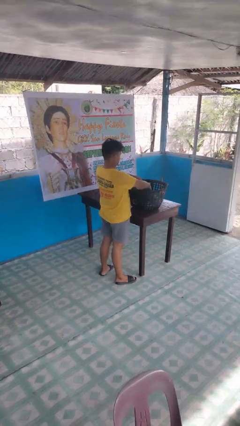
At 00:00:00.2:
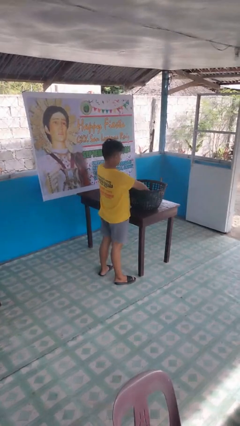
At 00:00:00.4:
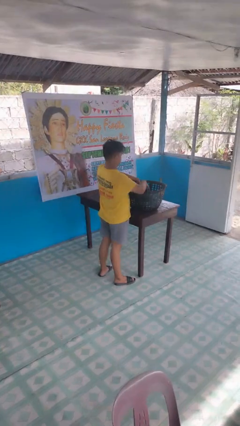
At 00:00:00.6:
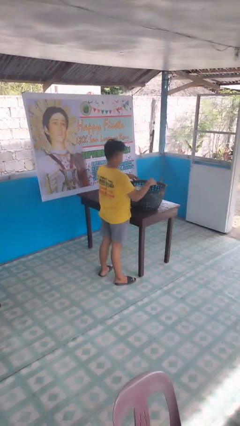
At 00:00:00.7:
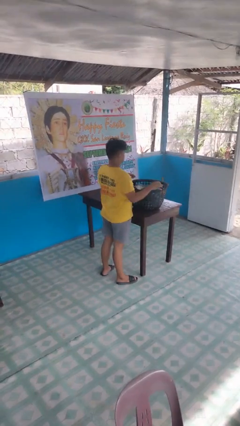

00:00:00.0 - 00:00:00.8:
person puts object into basket

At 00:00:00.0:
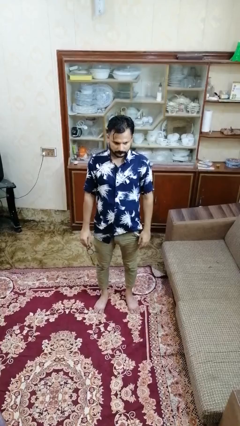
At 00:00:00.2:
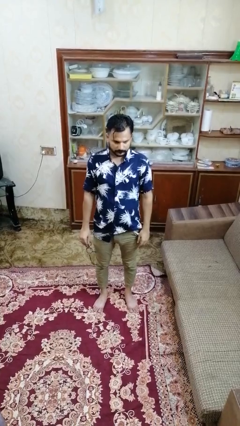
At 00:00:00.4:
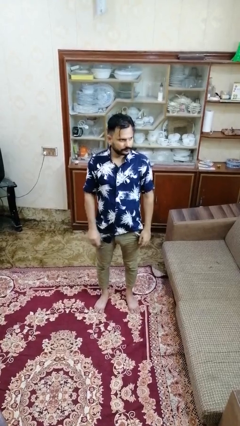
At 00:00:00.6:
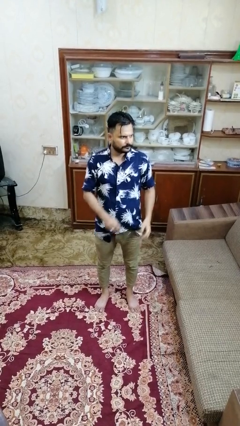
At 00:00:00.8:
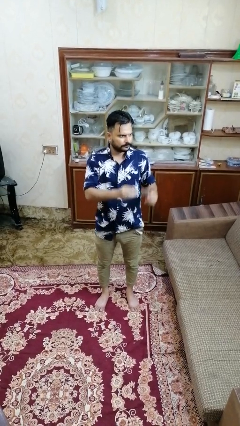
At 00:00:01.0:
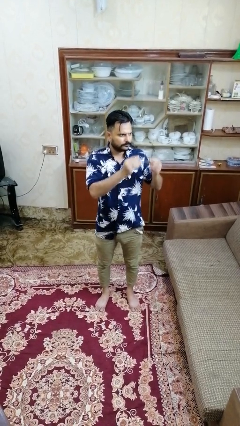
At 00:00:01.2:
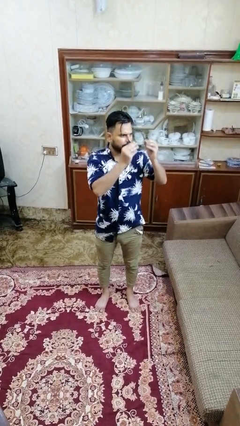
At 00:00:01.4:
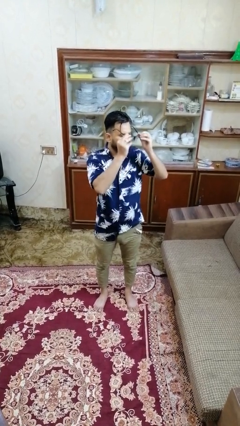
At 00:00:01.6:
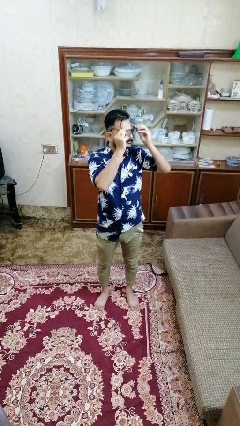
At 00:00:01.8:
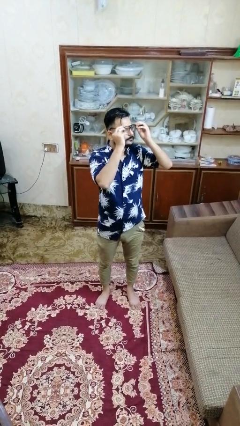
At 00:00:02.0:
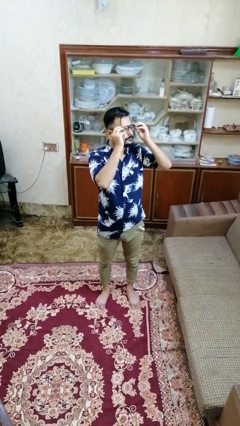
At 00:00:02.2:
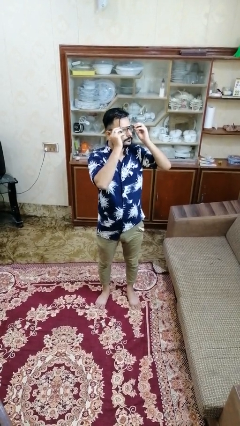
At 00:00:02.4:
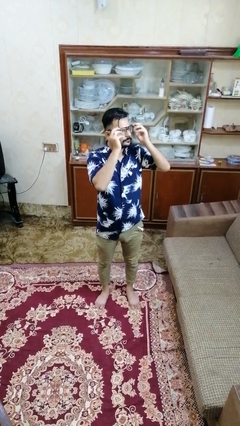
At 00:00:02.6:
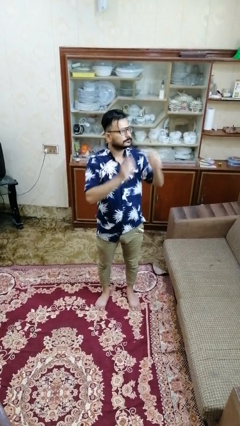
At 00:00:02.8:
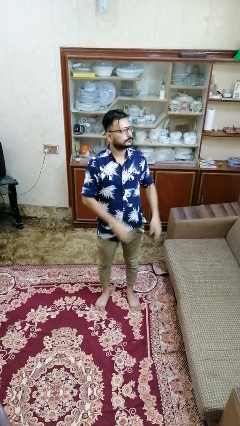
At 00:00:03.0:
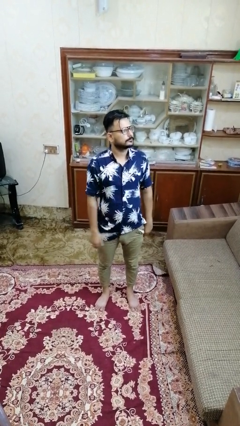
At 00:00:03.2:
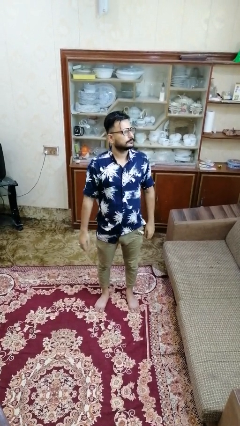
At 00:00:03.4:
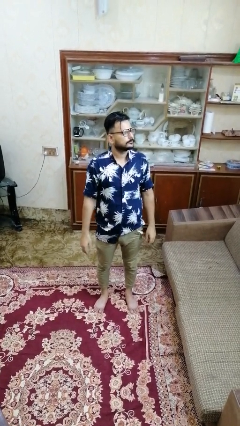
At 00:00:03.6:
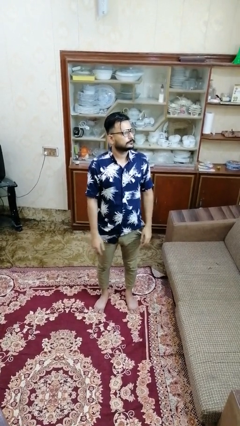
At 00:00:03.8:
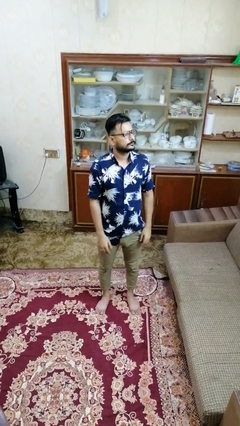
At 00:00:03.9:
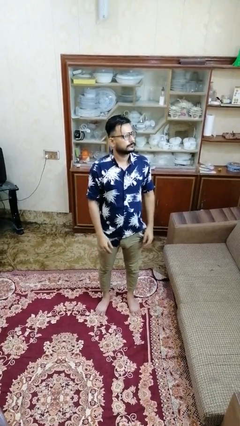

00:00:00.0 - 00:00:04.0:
person puts on glasses

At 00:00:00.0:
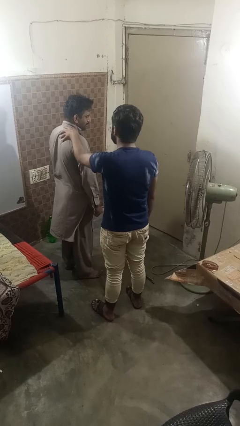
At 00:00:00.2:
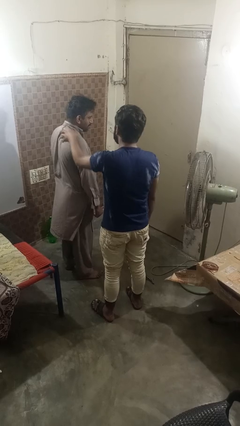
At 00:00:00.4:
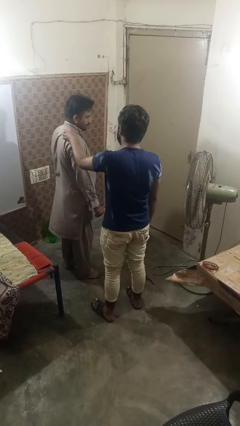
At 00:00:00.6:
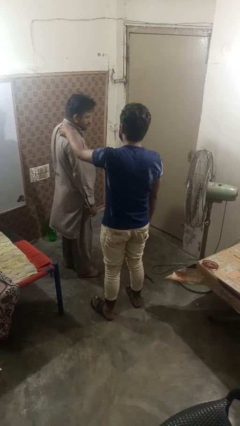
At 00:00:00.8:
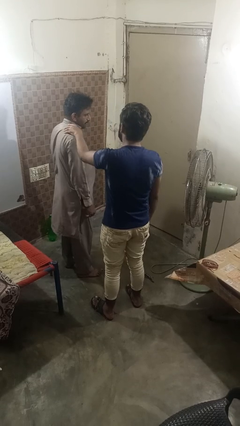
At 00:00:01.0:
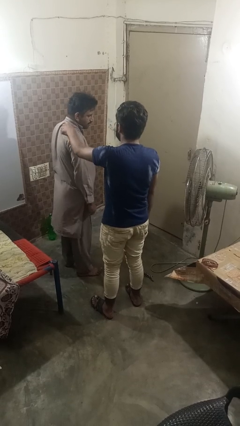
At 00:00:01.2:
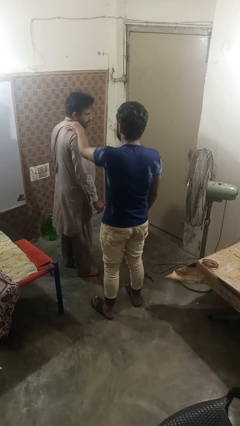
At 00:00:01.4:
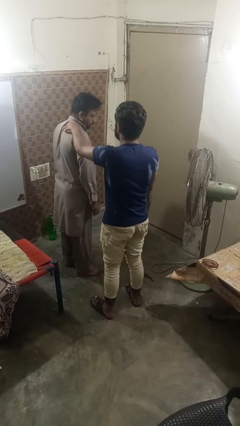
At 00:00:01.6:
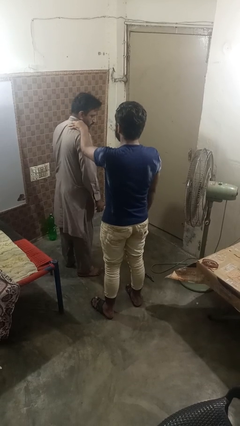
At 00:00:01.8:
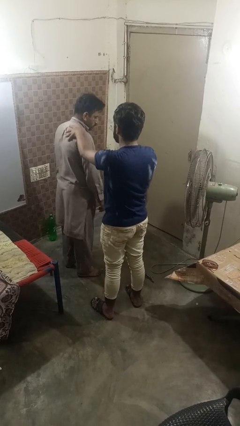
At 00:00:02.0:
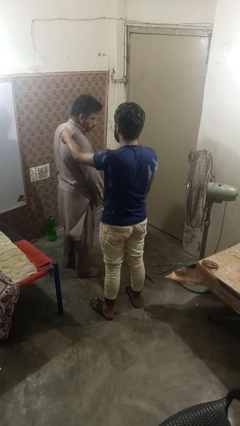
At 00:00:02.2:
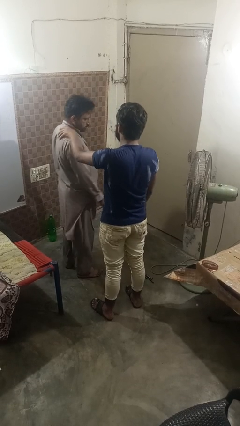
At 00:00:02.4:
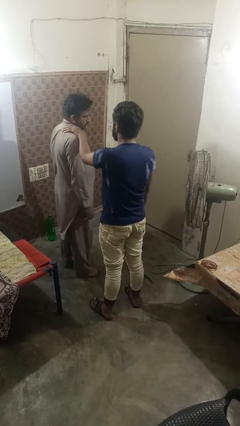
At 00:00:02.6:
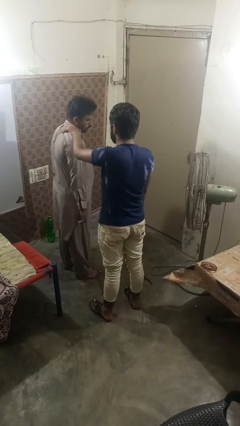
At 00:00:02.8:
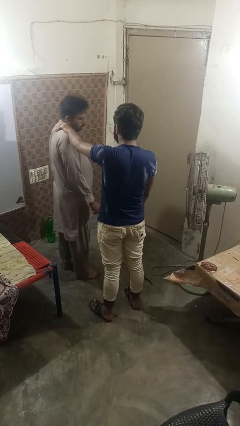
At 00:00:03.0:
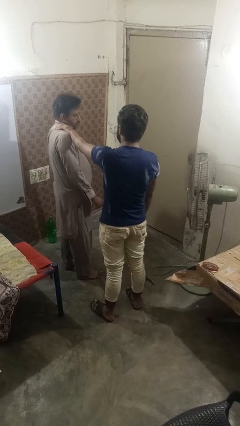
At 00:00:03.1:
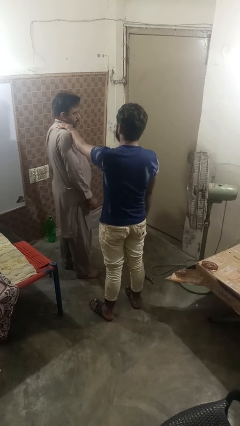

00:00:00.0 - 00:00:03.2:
person grabs person by shoulder

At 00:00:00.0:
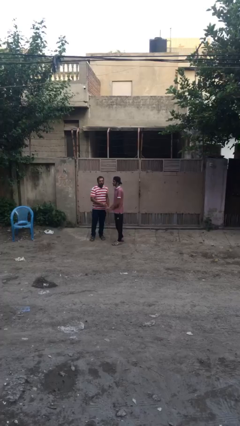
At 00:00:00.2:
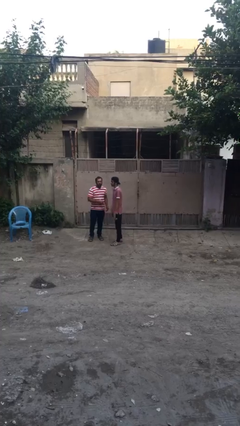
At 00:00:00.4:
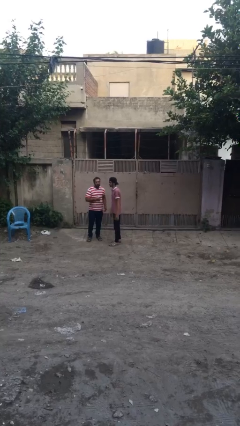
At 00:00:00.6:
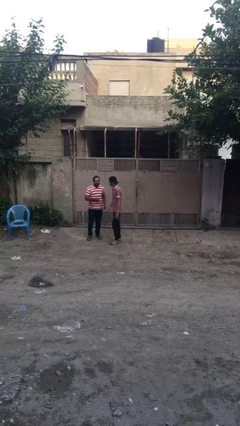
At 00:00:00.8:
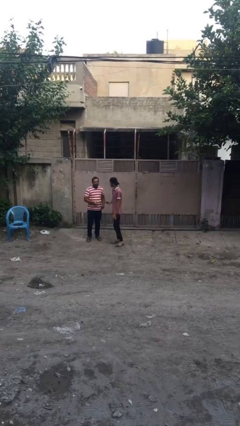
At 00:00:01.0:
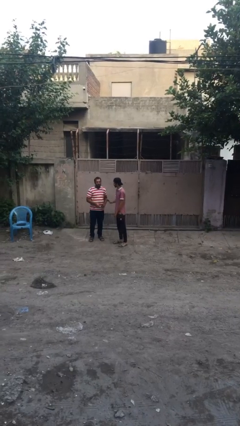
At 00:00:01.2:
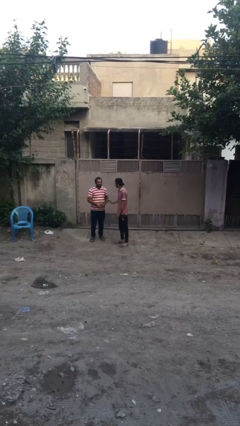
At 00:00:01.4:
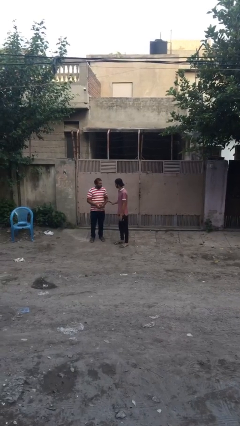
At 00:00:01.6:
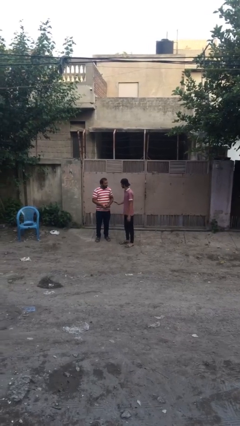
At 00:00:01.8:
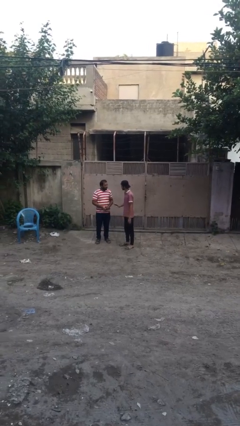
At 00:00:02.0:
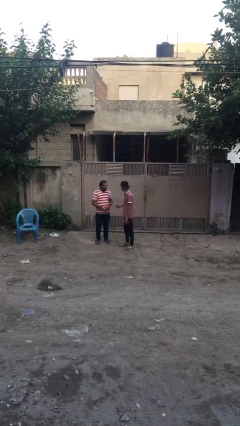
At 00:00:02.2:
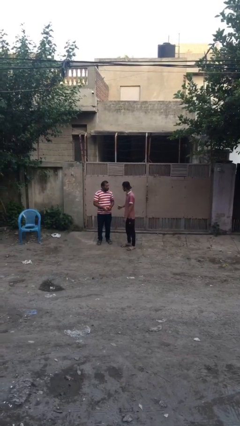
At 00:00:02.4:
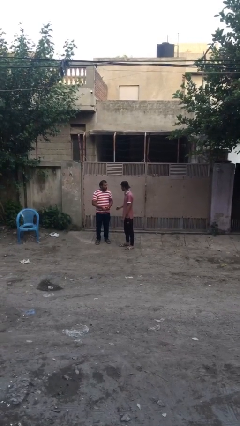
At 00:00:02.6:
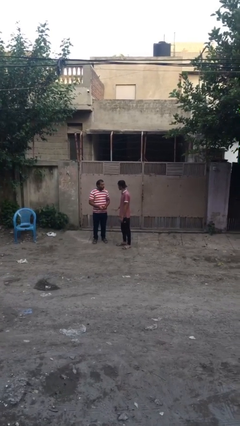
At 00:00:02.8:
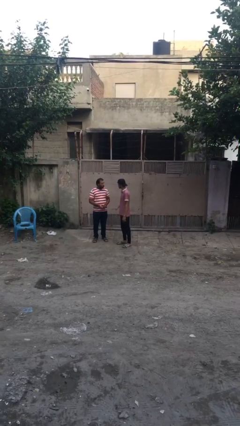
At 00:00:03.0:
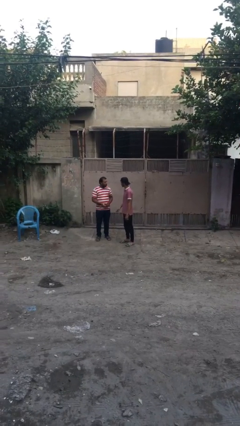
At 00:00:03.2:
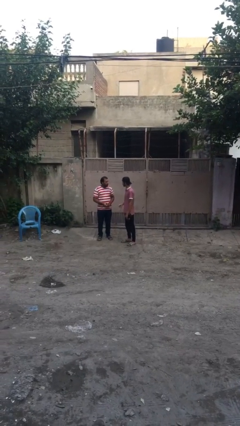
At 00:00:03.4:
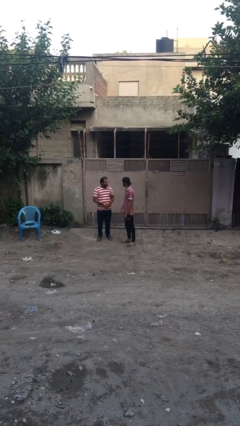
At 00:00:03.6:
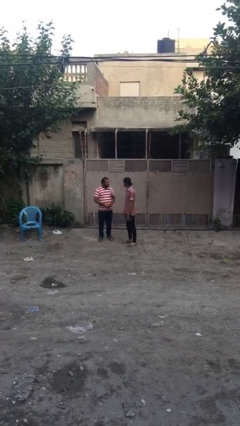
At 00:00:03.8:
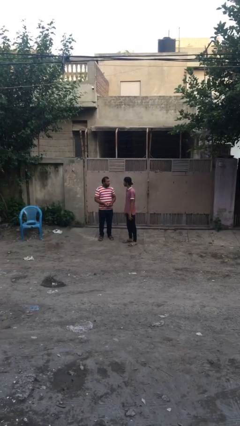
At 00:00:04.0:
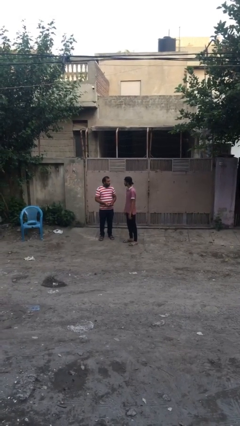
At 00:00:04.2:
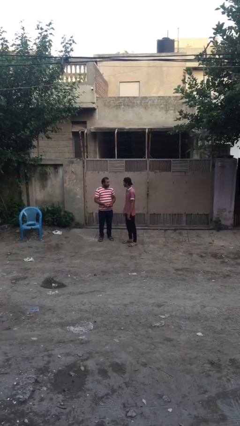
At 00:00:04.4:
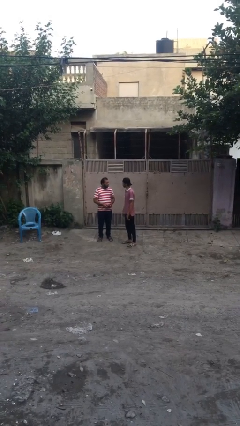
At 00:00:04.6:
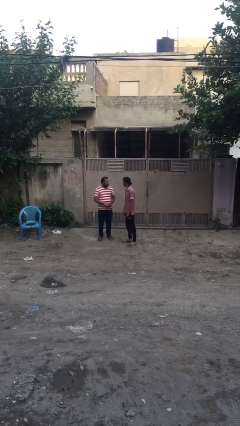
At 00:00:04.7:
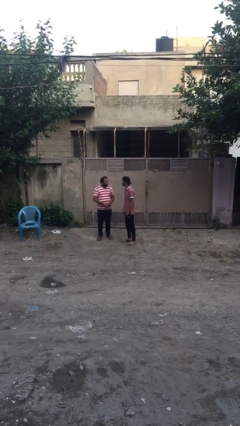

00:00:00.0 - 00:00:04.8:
person talks to person

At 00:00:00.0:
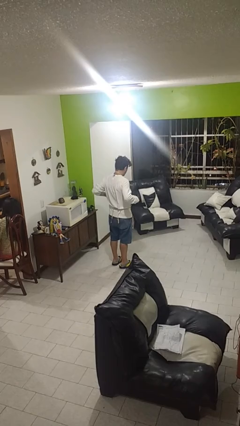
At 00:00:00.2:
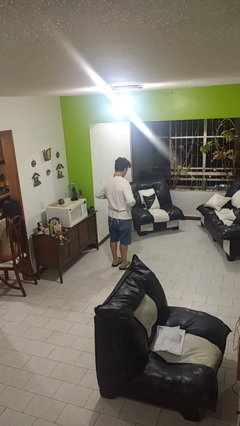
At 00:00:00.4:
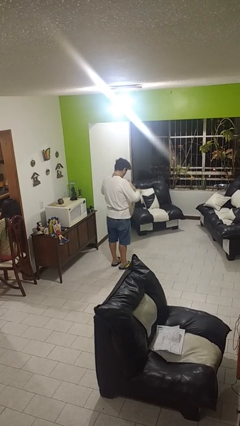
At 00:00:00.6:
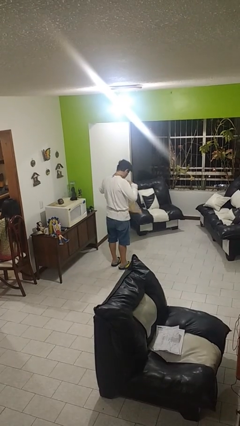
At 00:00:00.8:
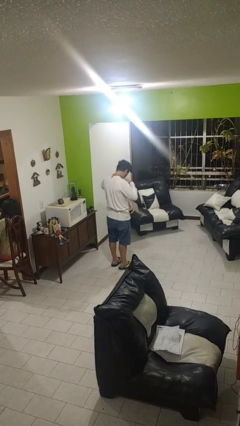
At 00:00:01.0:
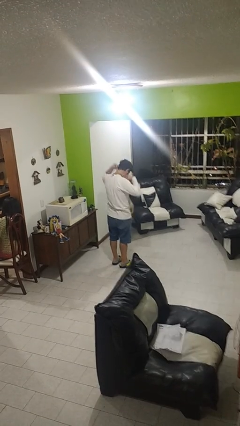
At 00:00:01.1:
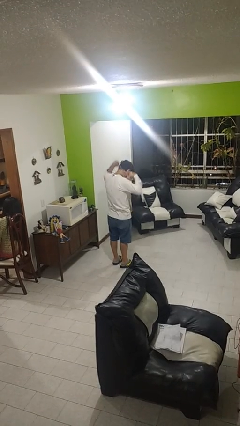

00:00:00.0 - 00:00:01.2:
person takes off apron

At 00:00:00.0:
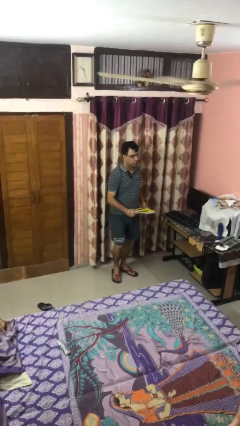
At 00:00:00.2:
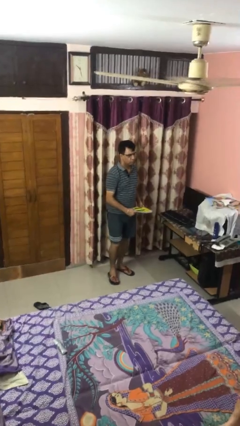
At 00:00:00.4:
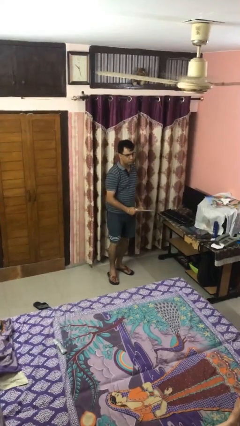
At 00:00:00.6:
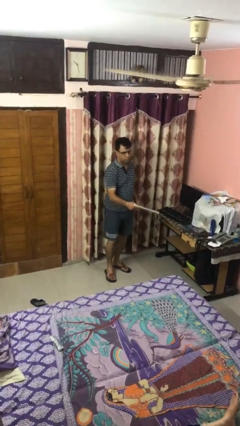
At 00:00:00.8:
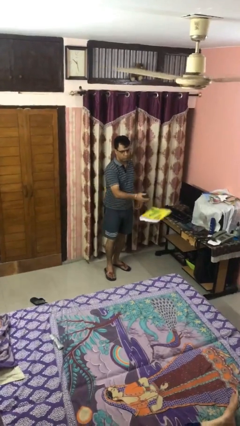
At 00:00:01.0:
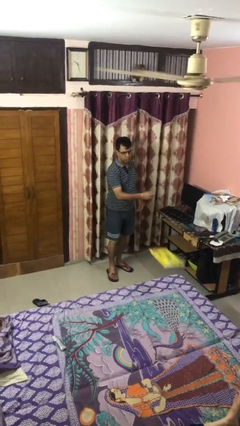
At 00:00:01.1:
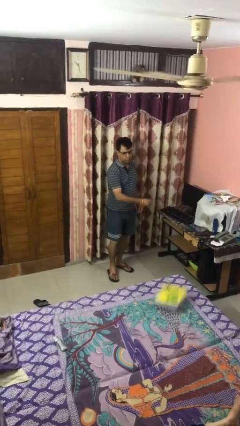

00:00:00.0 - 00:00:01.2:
person throws object on bed

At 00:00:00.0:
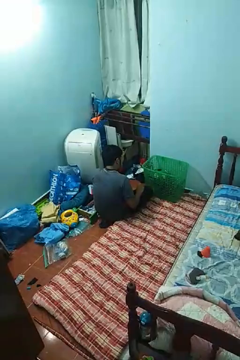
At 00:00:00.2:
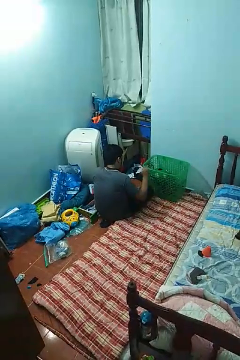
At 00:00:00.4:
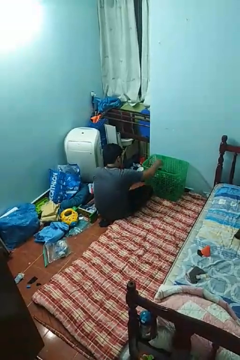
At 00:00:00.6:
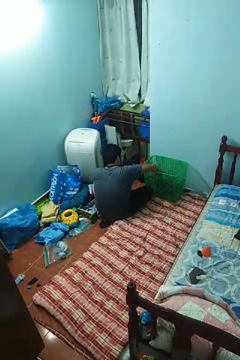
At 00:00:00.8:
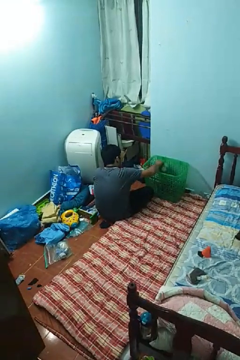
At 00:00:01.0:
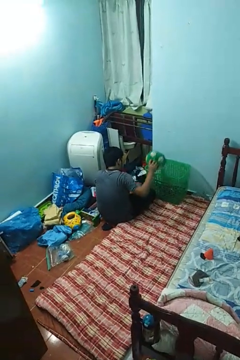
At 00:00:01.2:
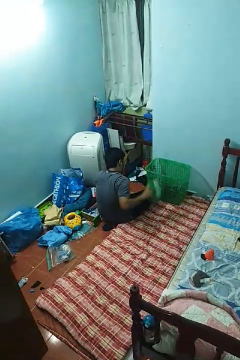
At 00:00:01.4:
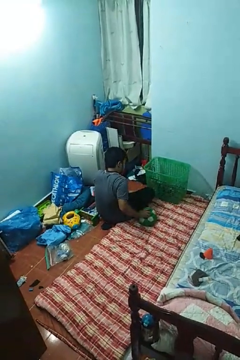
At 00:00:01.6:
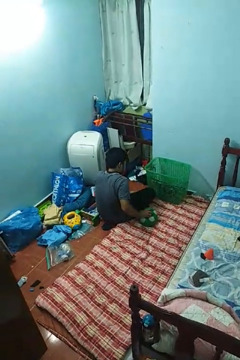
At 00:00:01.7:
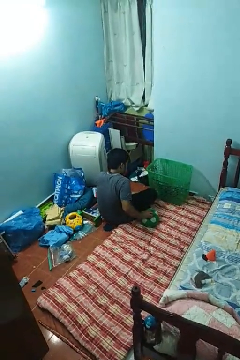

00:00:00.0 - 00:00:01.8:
person takes object from basket

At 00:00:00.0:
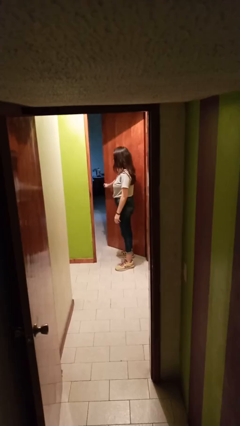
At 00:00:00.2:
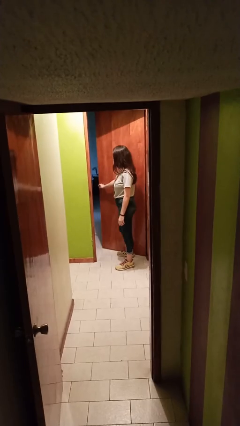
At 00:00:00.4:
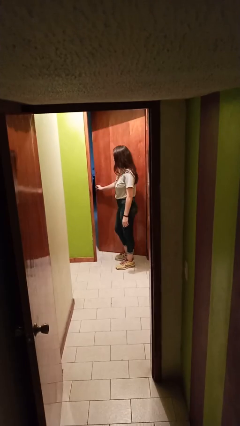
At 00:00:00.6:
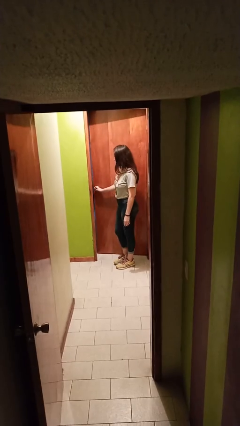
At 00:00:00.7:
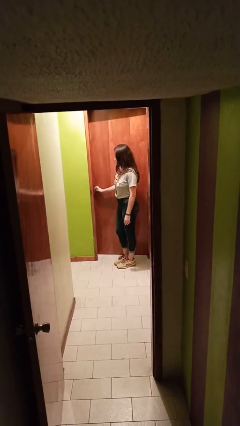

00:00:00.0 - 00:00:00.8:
person closes facility door
